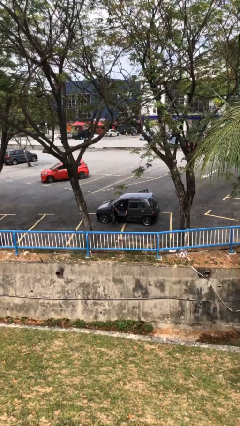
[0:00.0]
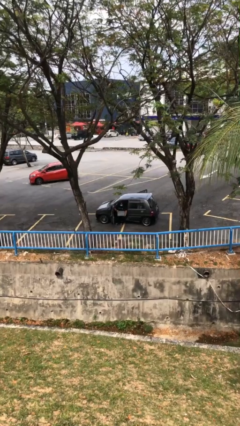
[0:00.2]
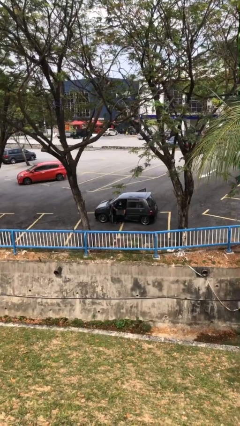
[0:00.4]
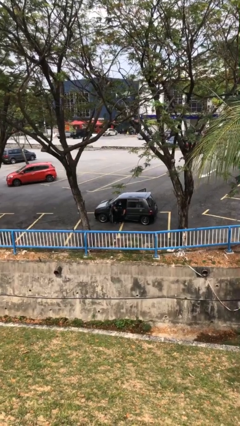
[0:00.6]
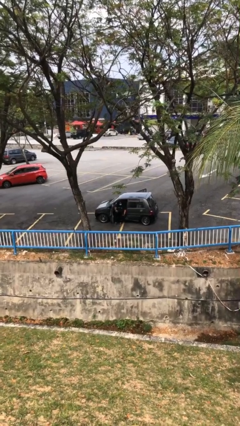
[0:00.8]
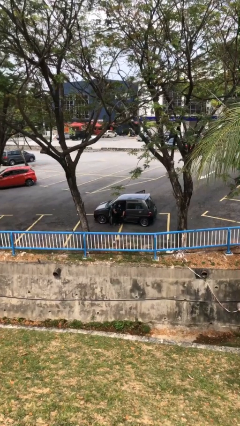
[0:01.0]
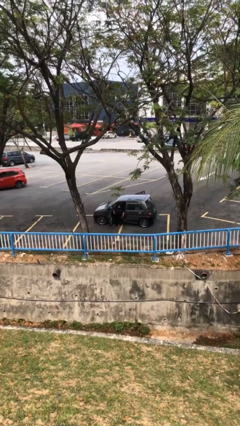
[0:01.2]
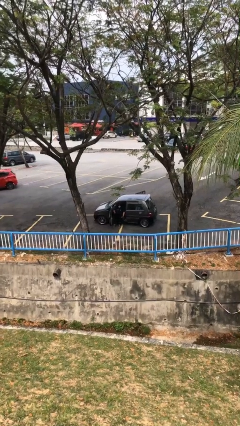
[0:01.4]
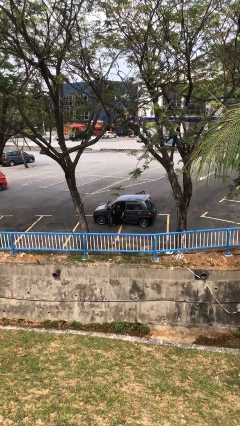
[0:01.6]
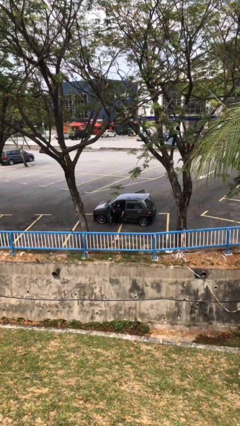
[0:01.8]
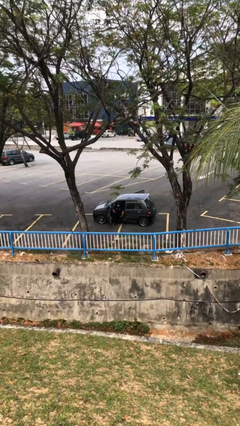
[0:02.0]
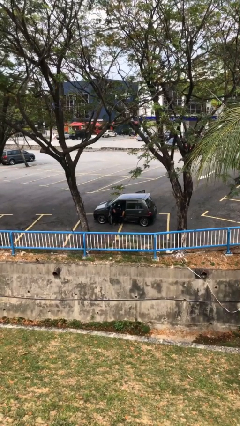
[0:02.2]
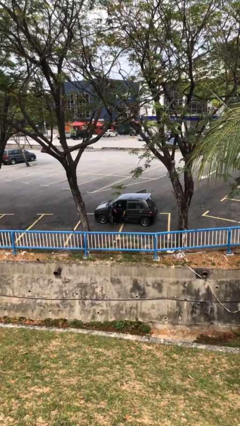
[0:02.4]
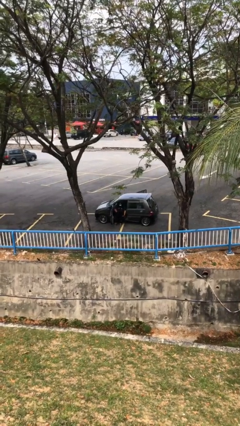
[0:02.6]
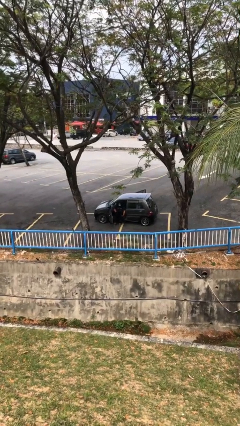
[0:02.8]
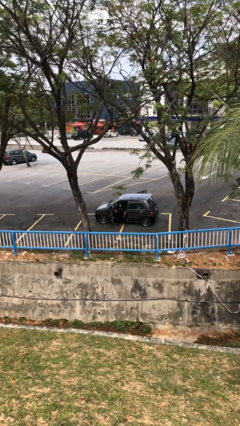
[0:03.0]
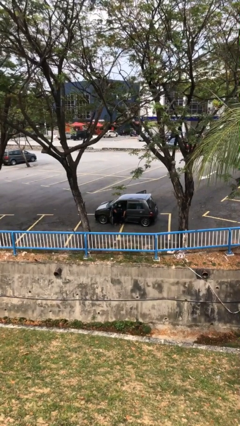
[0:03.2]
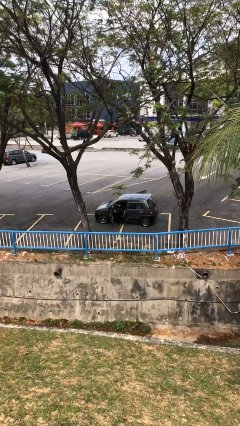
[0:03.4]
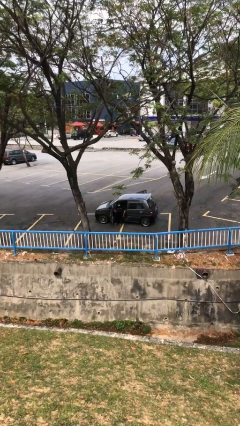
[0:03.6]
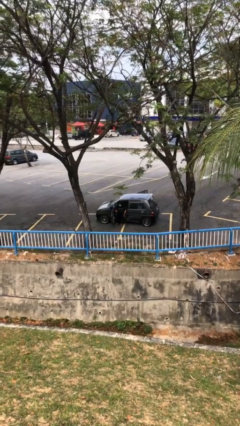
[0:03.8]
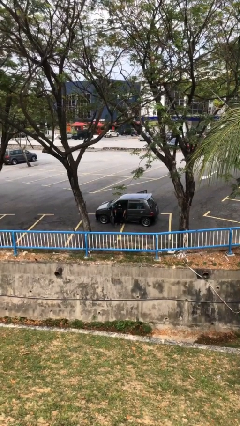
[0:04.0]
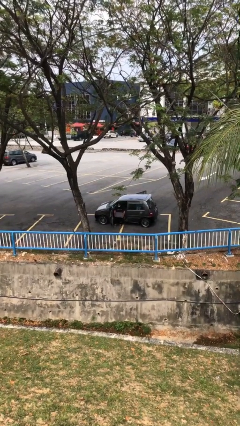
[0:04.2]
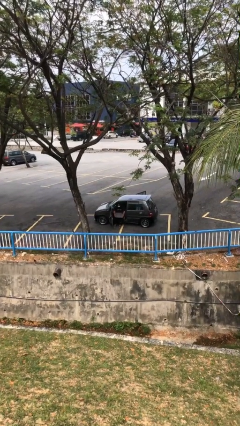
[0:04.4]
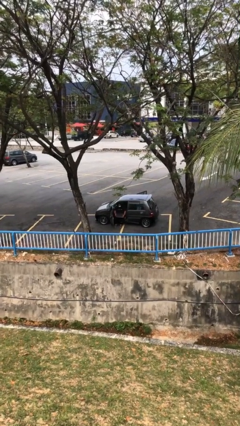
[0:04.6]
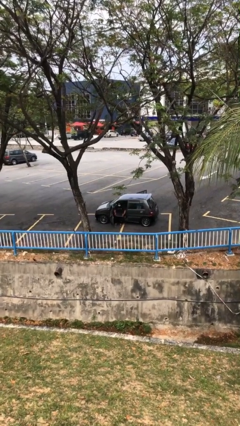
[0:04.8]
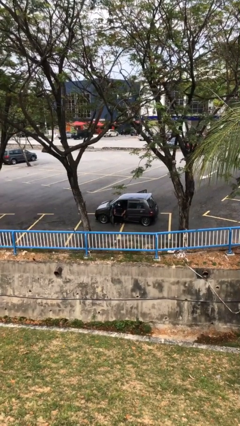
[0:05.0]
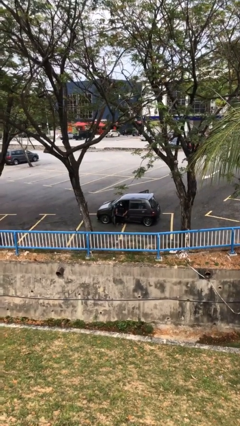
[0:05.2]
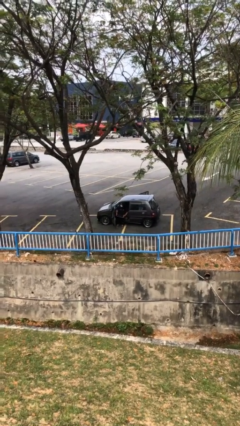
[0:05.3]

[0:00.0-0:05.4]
person interacts with laptop

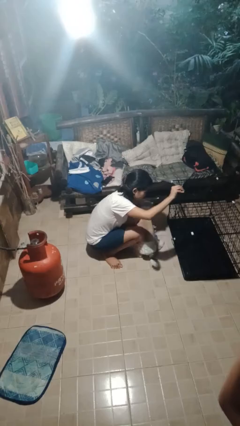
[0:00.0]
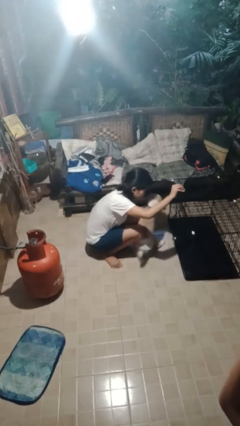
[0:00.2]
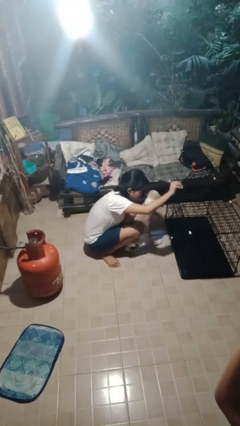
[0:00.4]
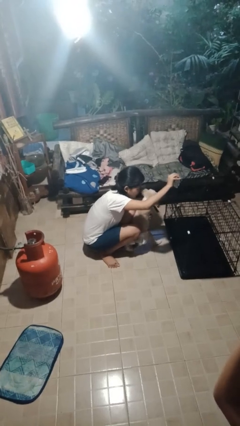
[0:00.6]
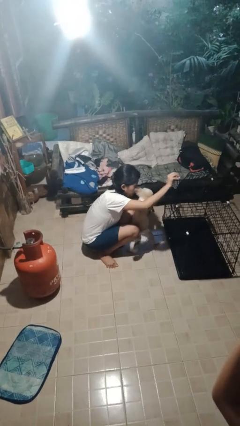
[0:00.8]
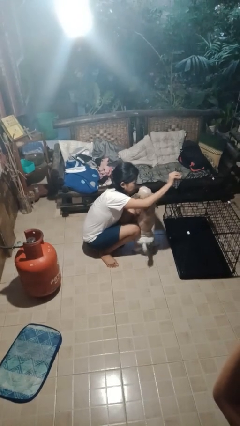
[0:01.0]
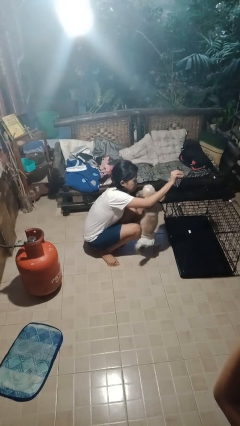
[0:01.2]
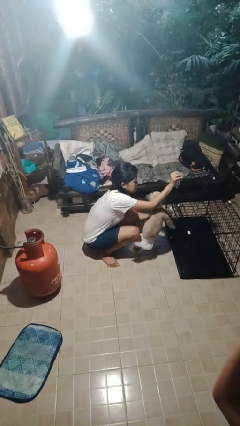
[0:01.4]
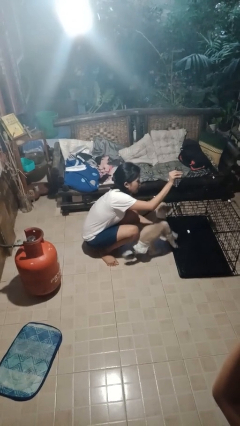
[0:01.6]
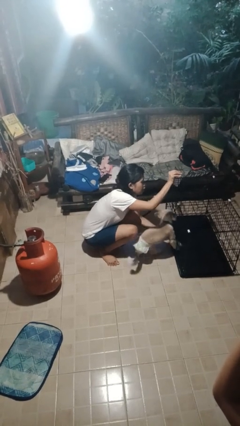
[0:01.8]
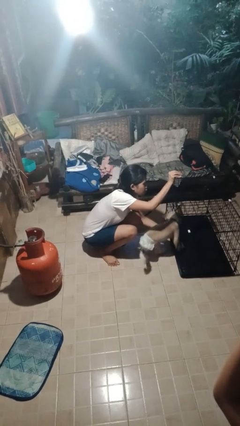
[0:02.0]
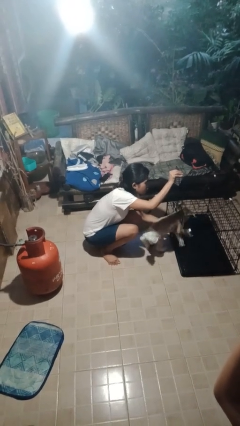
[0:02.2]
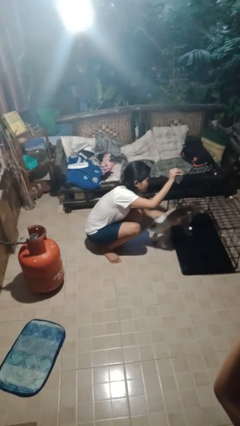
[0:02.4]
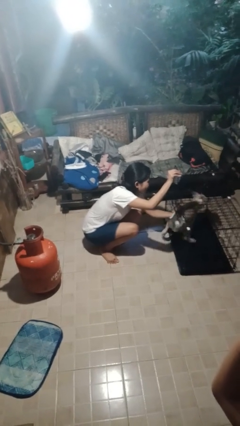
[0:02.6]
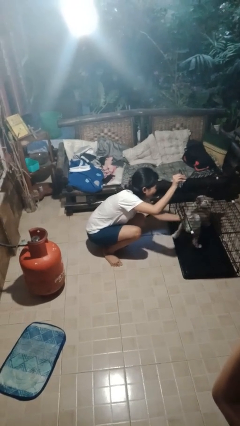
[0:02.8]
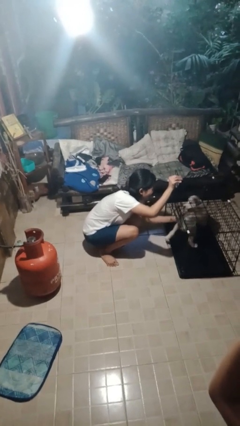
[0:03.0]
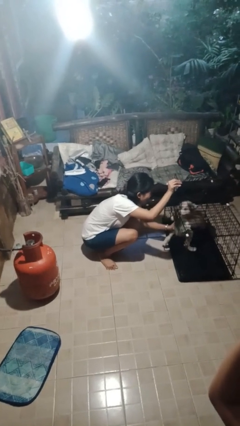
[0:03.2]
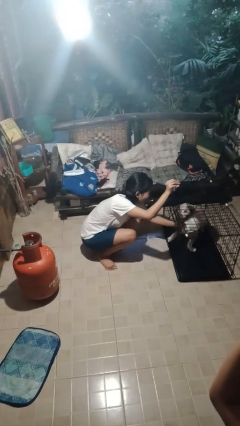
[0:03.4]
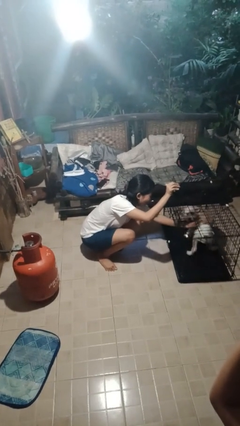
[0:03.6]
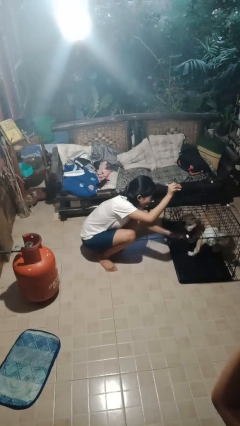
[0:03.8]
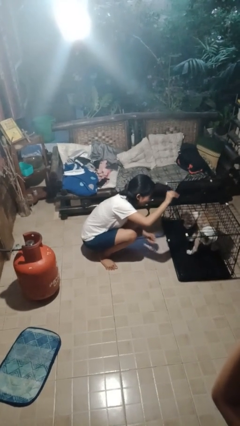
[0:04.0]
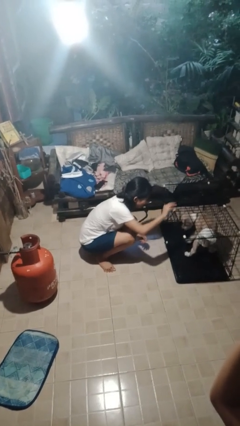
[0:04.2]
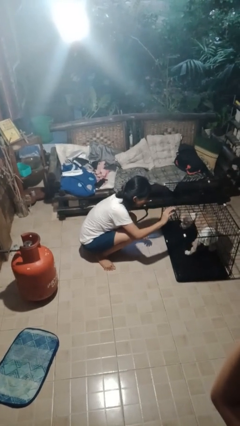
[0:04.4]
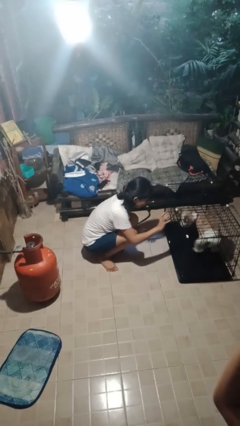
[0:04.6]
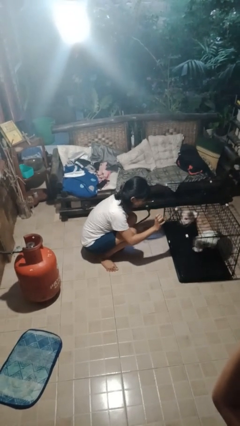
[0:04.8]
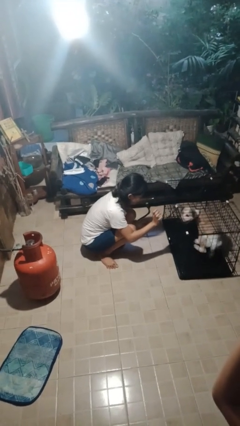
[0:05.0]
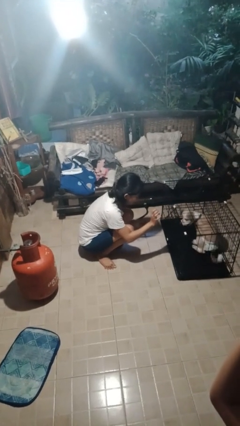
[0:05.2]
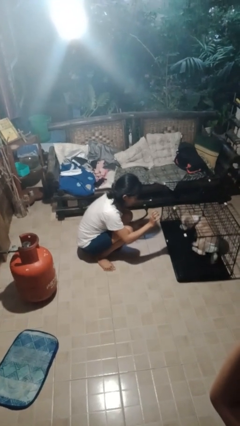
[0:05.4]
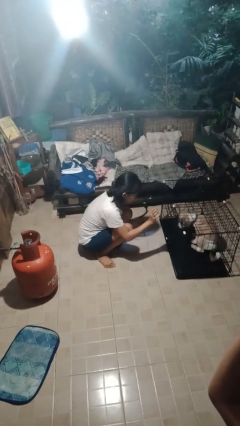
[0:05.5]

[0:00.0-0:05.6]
person crates dog

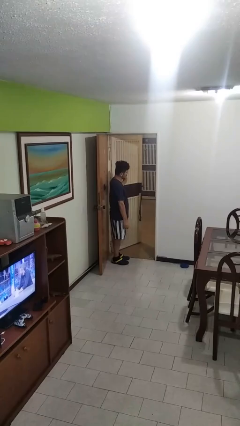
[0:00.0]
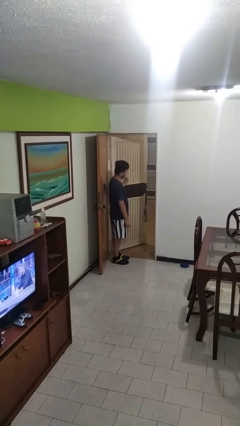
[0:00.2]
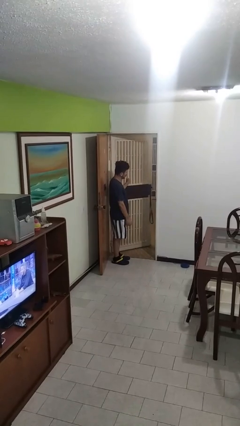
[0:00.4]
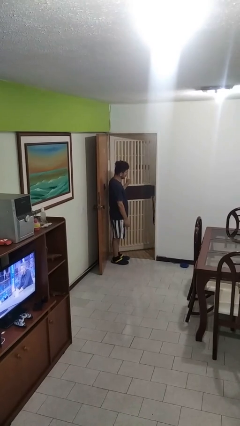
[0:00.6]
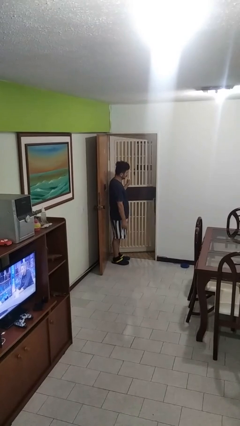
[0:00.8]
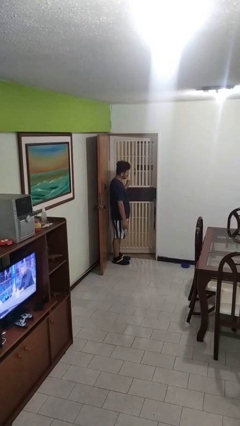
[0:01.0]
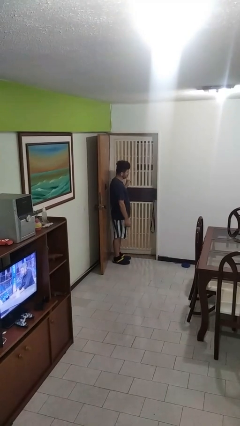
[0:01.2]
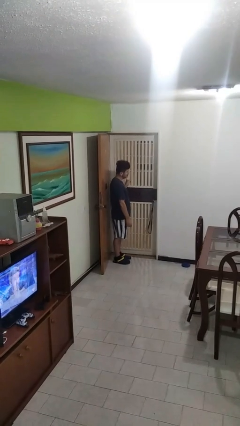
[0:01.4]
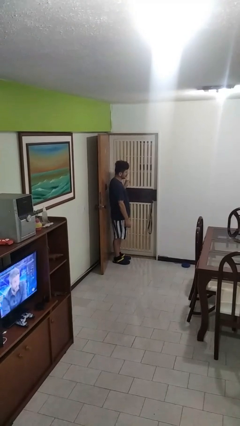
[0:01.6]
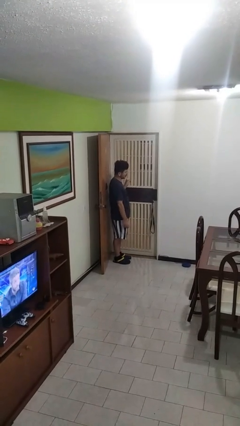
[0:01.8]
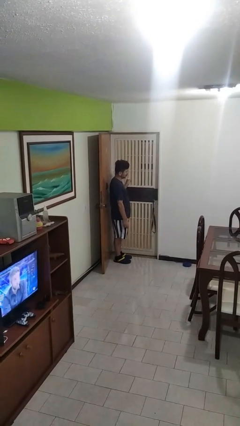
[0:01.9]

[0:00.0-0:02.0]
person closes facility door

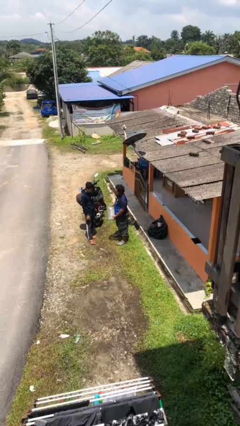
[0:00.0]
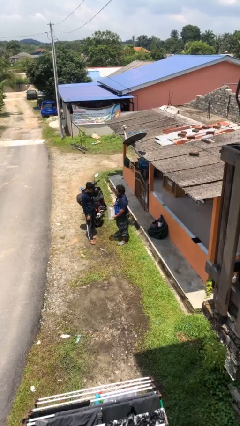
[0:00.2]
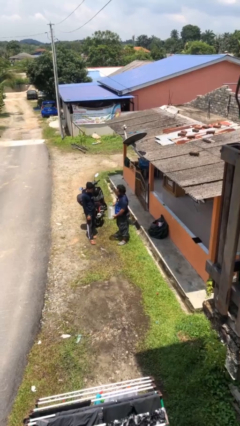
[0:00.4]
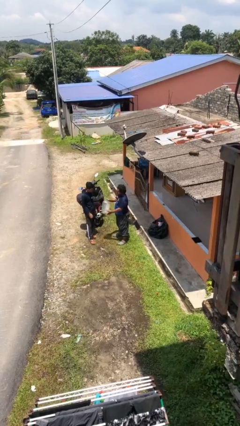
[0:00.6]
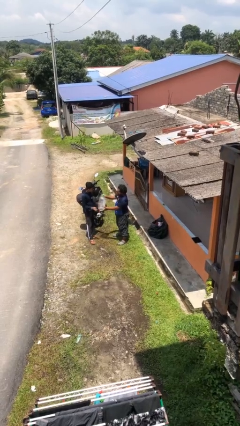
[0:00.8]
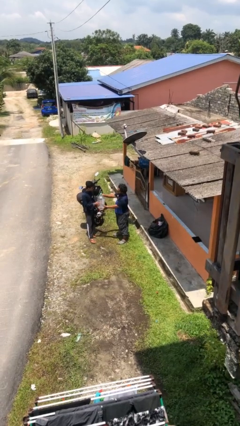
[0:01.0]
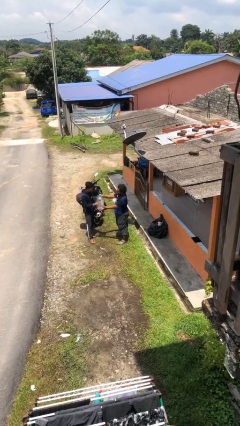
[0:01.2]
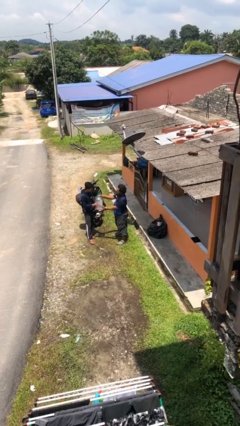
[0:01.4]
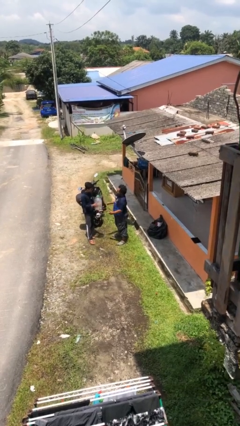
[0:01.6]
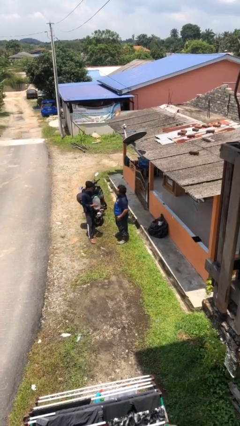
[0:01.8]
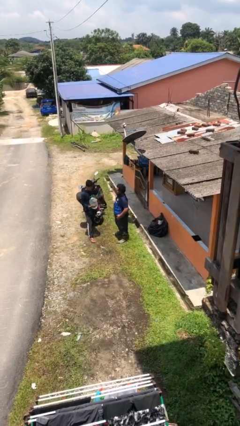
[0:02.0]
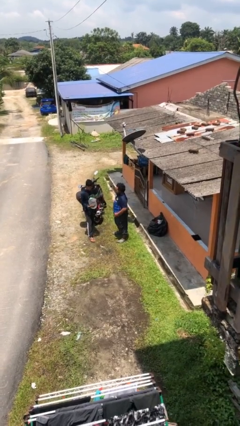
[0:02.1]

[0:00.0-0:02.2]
person transfers object to person

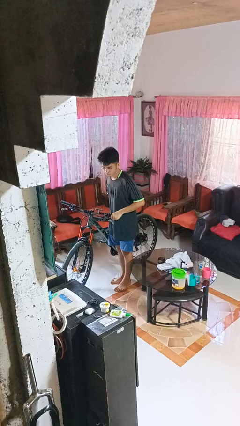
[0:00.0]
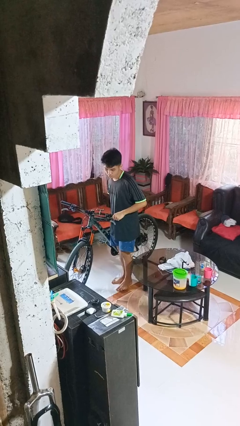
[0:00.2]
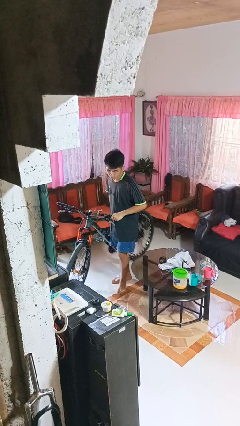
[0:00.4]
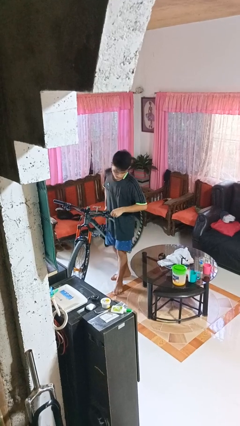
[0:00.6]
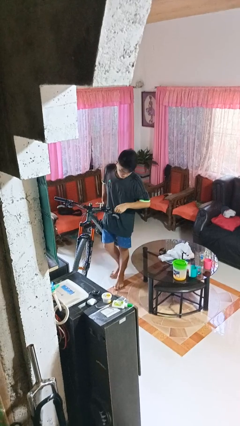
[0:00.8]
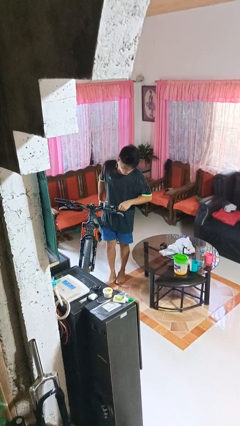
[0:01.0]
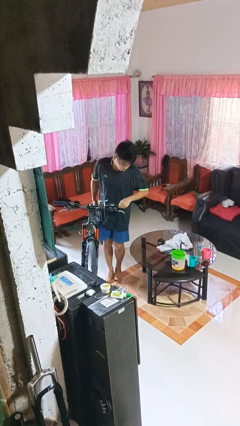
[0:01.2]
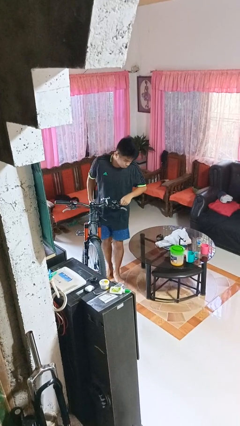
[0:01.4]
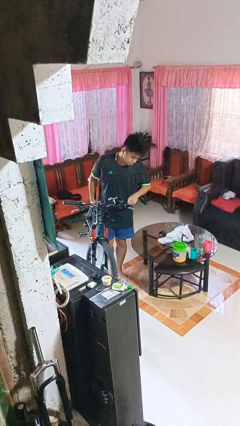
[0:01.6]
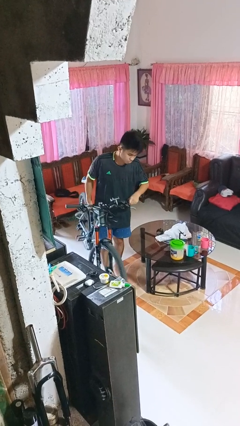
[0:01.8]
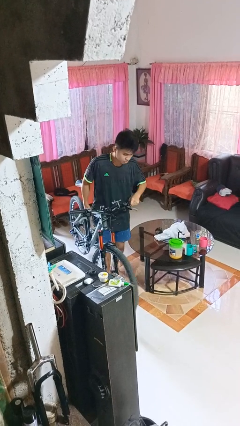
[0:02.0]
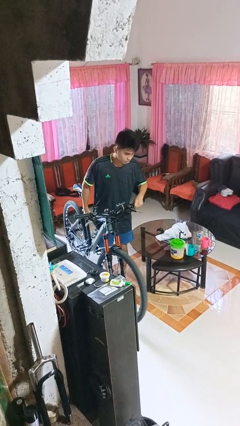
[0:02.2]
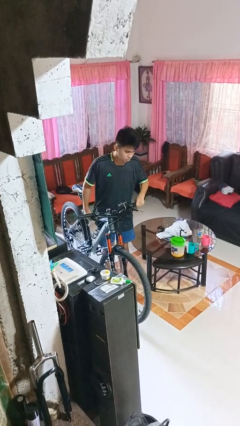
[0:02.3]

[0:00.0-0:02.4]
person carries bicycle

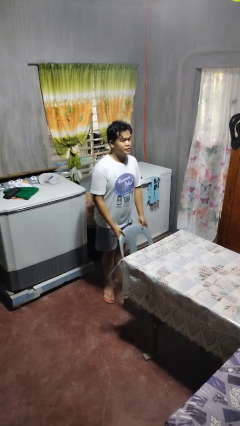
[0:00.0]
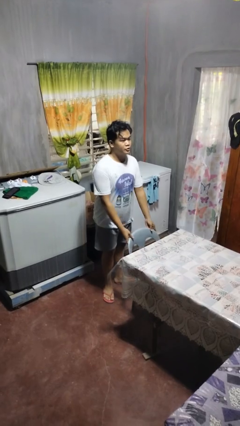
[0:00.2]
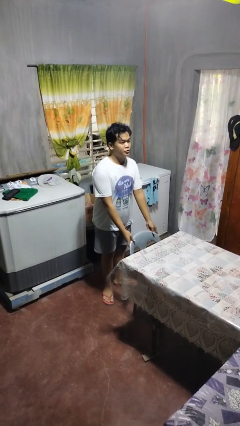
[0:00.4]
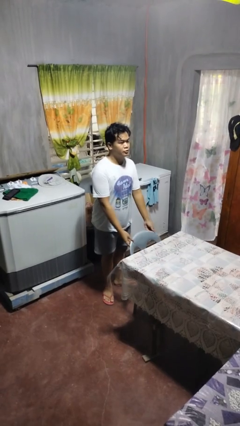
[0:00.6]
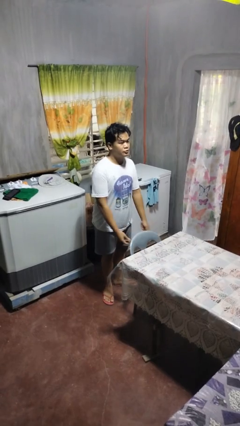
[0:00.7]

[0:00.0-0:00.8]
person pushes in chair
